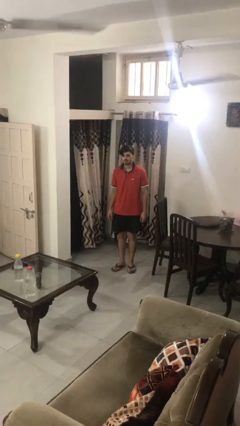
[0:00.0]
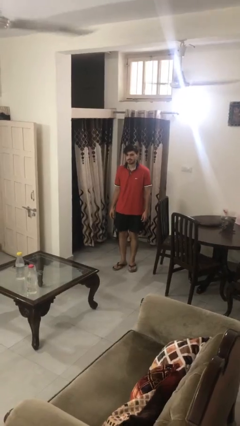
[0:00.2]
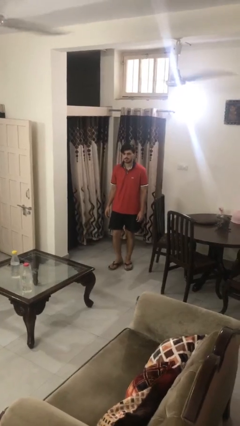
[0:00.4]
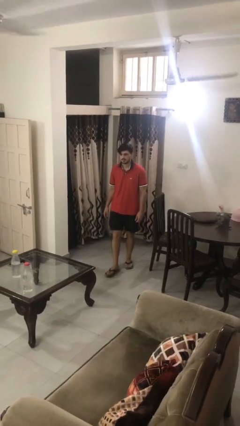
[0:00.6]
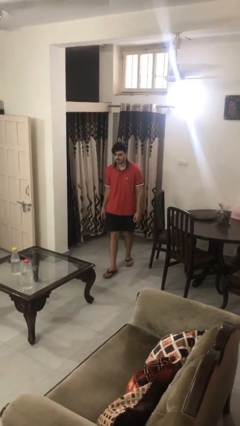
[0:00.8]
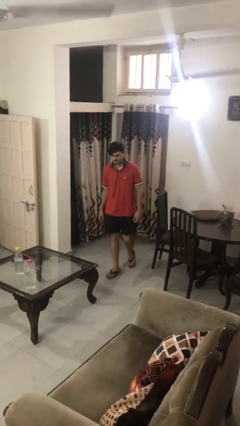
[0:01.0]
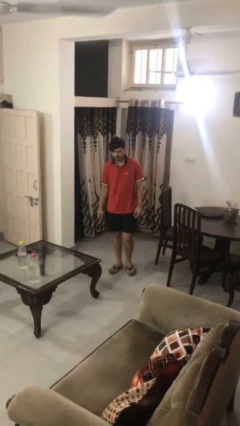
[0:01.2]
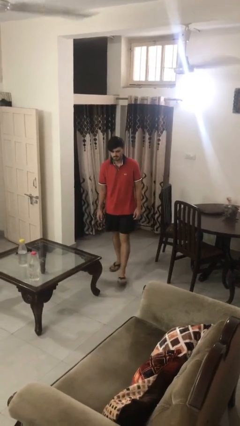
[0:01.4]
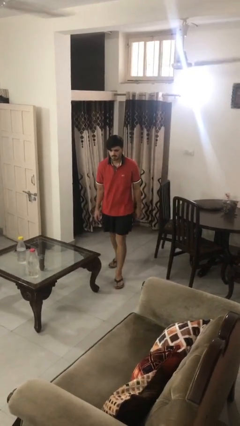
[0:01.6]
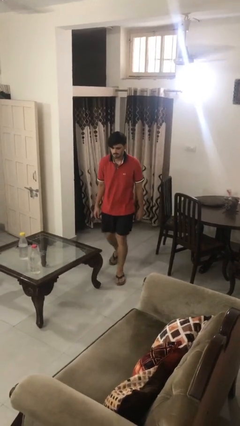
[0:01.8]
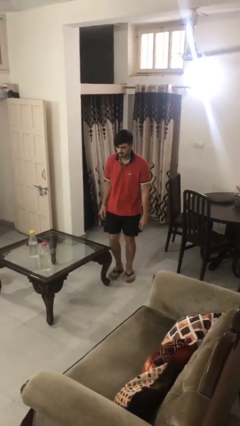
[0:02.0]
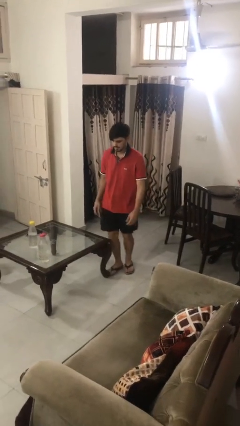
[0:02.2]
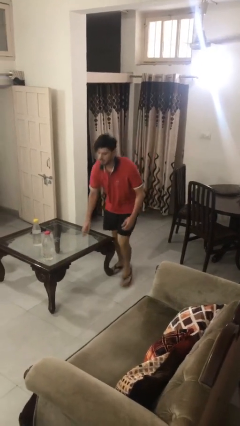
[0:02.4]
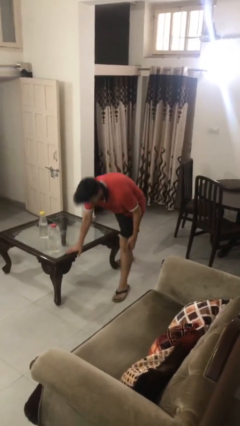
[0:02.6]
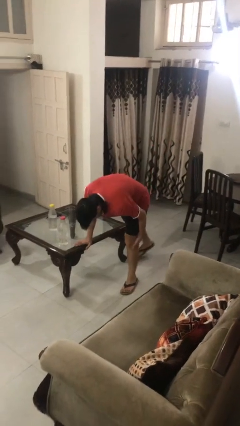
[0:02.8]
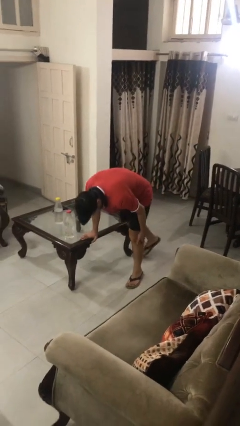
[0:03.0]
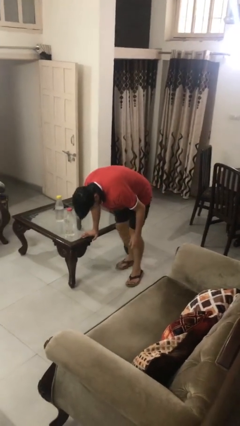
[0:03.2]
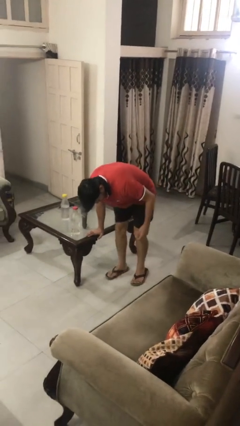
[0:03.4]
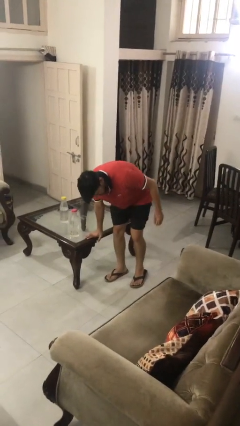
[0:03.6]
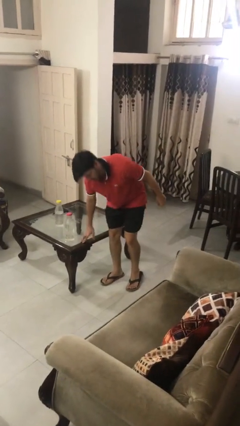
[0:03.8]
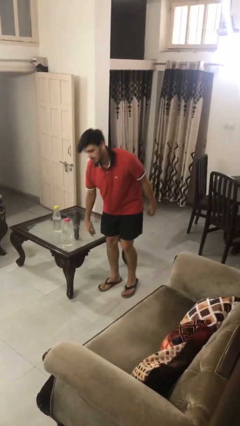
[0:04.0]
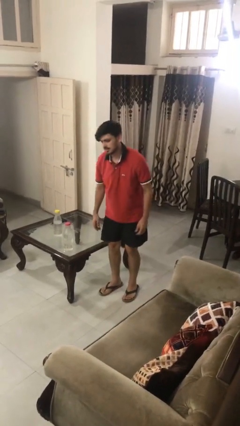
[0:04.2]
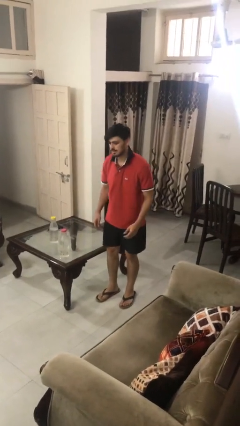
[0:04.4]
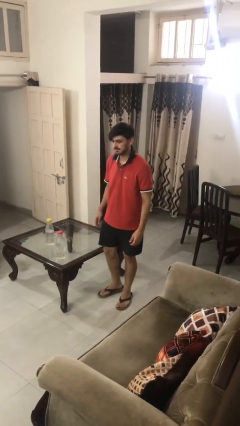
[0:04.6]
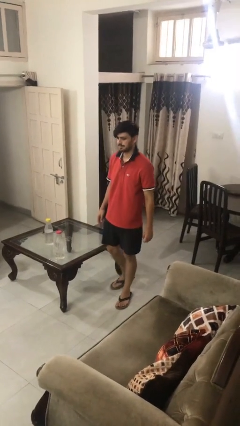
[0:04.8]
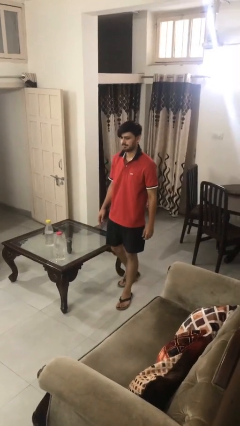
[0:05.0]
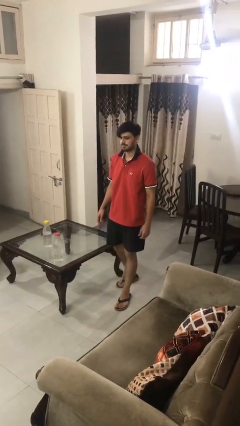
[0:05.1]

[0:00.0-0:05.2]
person bumps into table

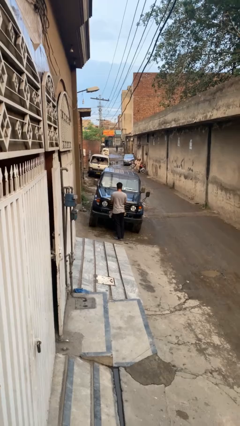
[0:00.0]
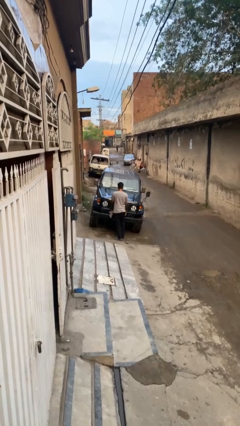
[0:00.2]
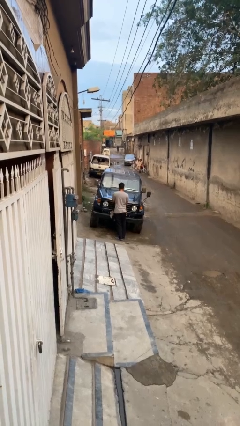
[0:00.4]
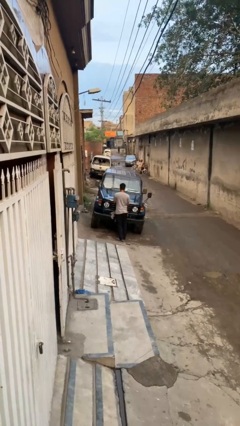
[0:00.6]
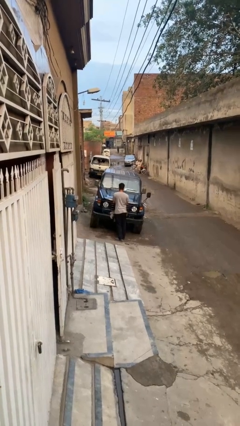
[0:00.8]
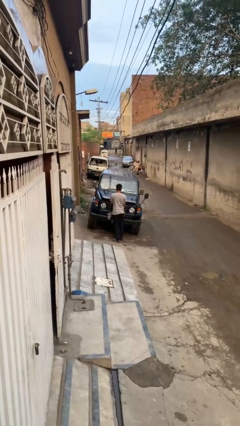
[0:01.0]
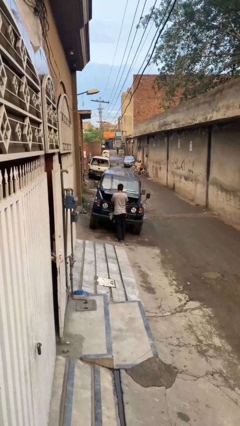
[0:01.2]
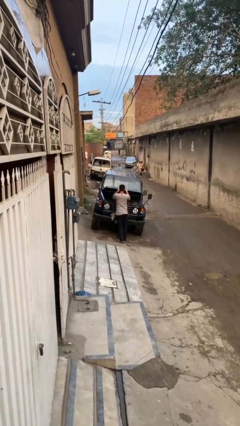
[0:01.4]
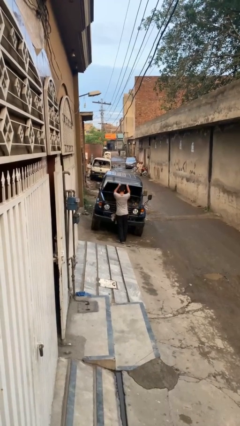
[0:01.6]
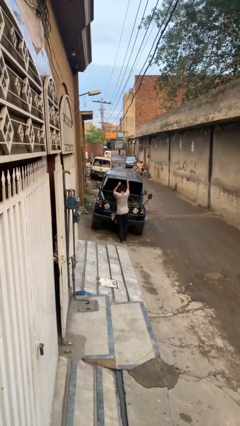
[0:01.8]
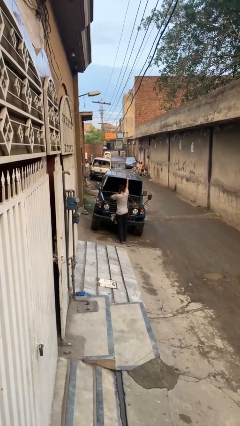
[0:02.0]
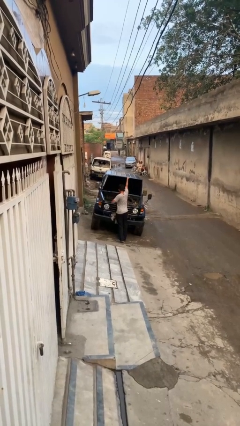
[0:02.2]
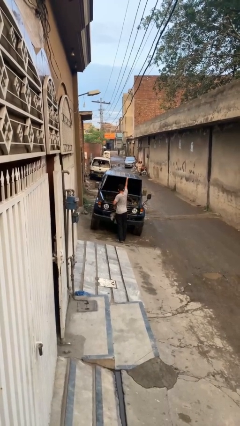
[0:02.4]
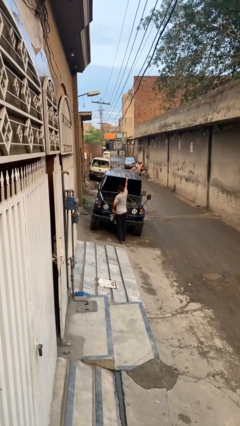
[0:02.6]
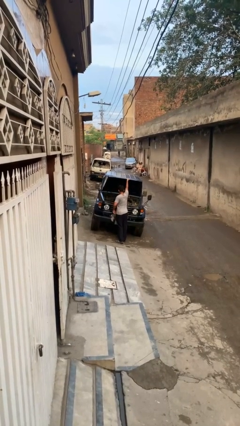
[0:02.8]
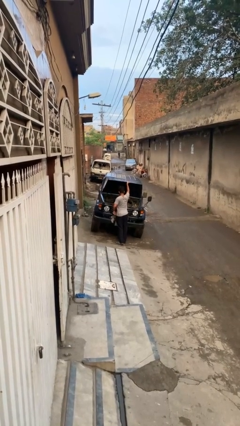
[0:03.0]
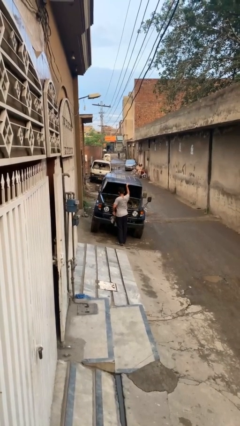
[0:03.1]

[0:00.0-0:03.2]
person opens car hood

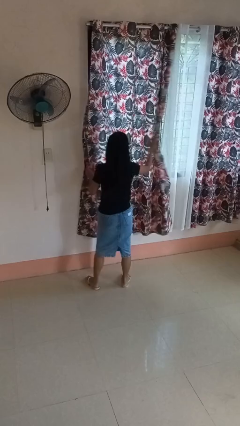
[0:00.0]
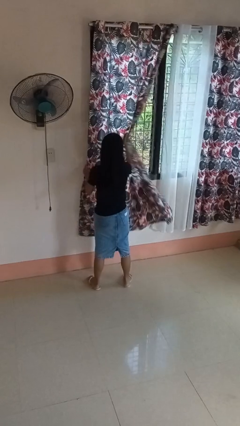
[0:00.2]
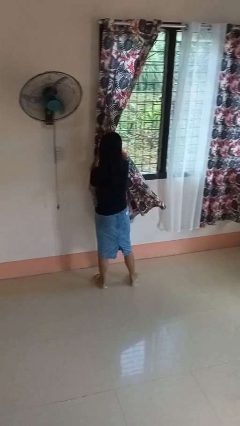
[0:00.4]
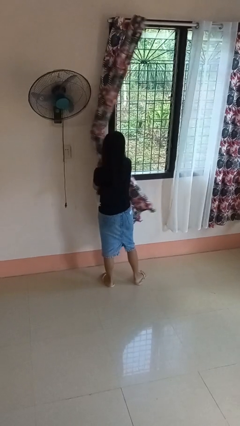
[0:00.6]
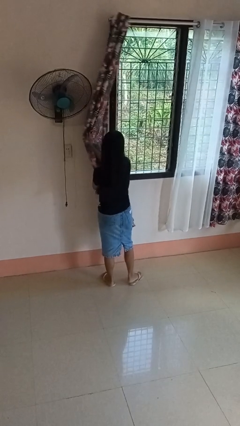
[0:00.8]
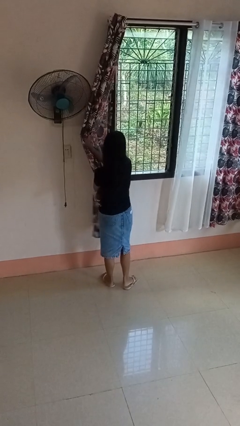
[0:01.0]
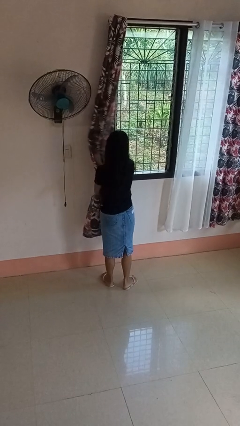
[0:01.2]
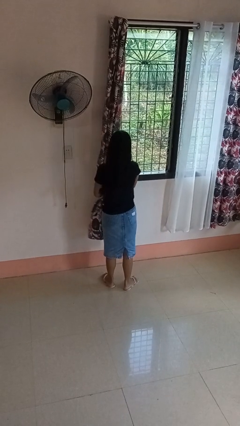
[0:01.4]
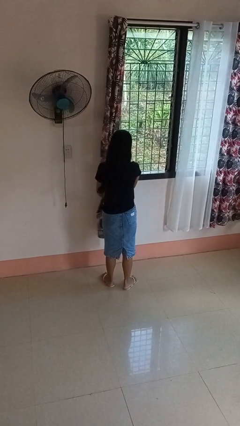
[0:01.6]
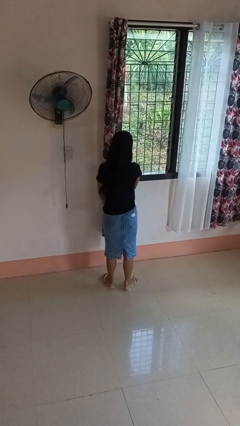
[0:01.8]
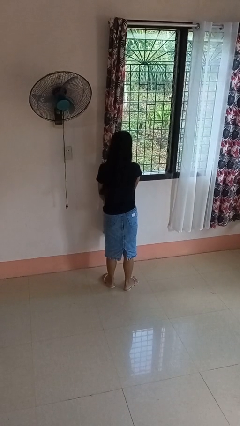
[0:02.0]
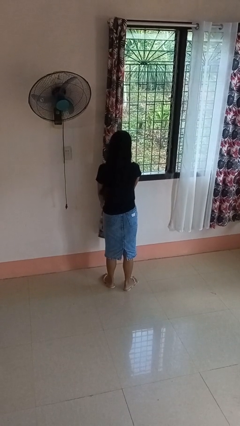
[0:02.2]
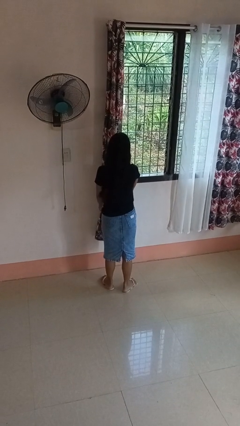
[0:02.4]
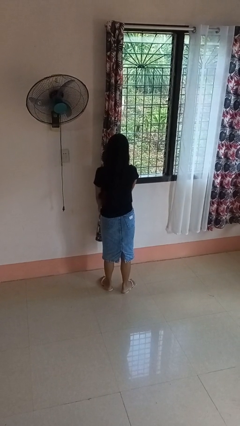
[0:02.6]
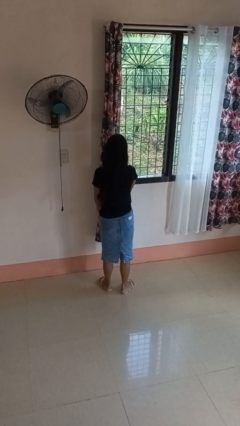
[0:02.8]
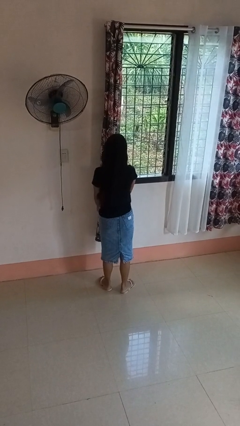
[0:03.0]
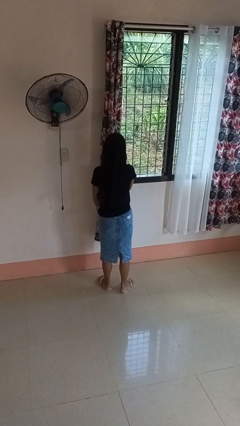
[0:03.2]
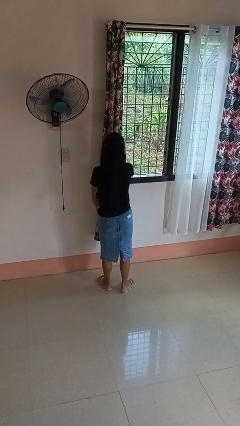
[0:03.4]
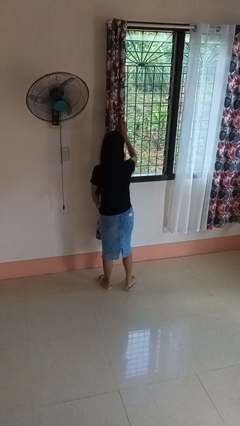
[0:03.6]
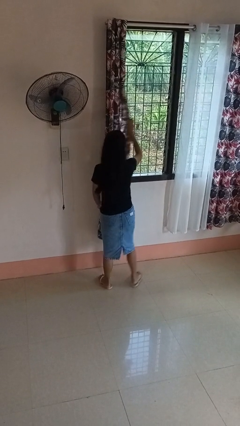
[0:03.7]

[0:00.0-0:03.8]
person opens curtains

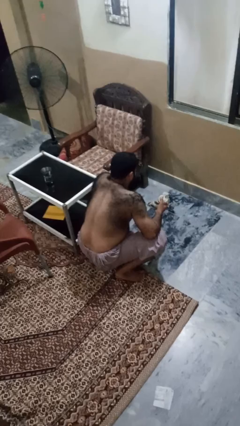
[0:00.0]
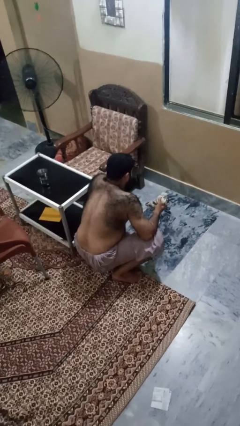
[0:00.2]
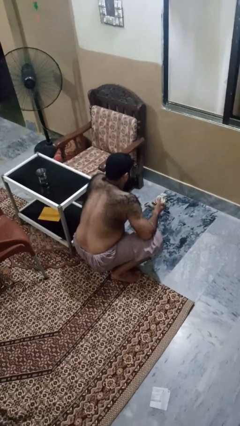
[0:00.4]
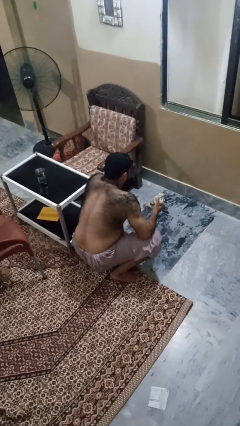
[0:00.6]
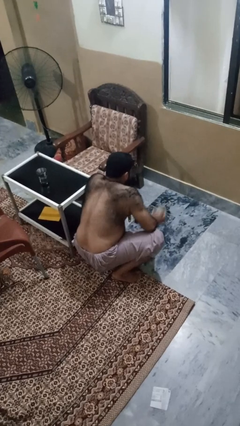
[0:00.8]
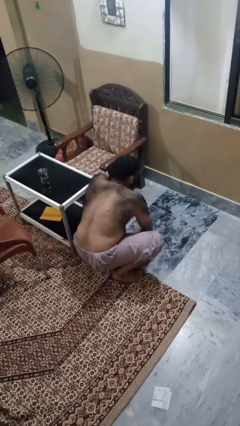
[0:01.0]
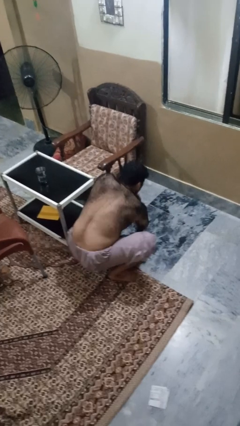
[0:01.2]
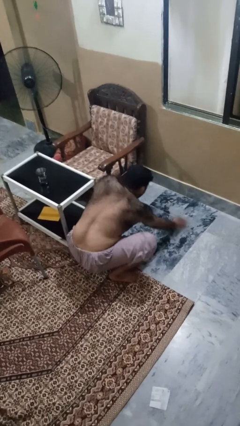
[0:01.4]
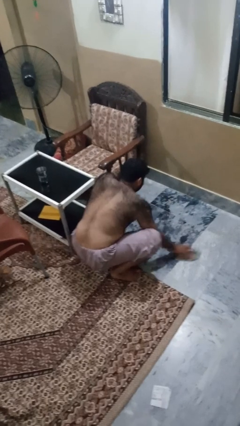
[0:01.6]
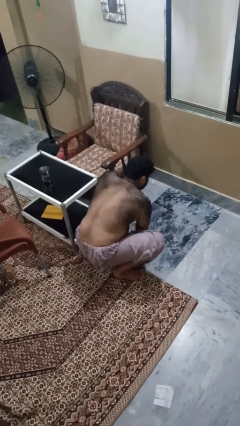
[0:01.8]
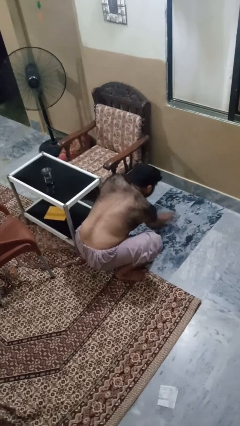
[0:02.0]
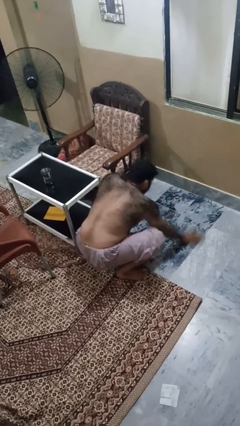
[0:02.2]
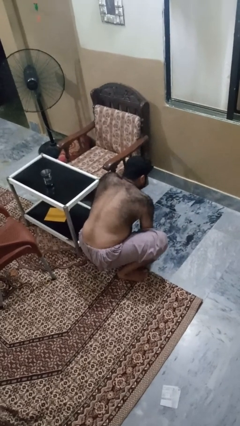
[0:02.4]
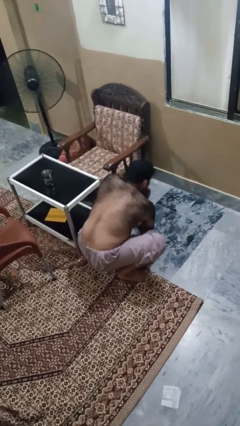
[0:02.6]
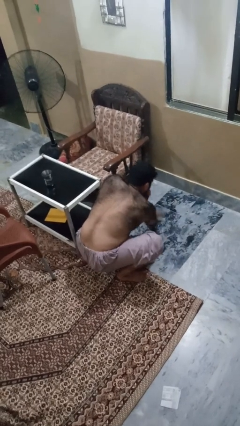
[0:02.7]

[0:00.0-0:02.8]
person mops

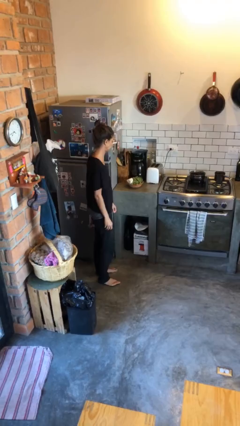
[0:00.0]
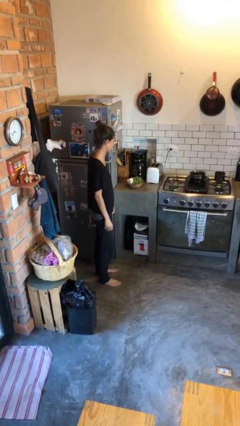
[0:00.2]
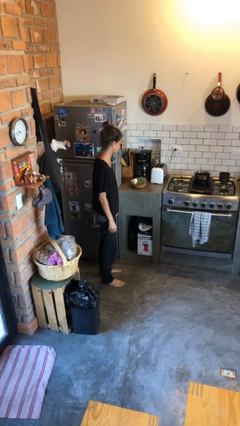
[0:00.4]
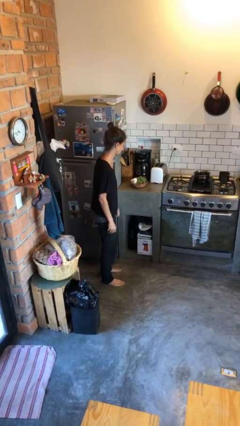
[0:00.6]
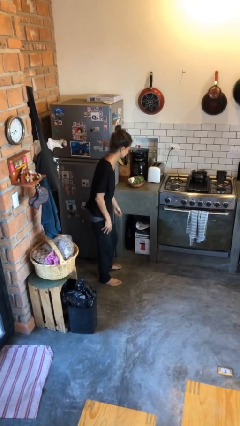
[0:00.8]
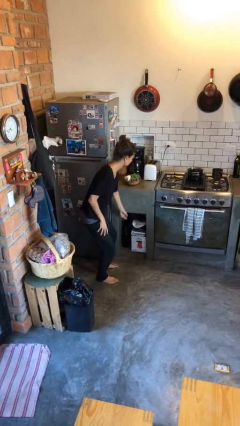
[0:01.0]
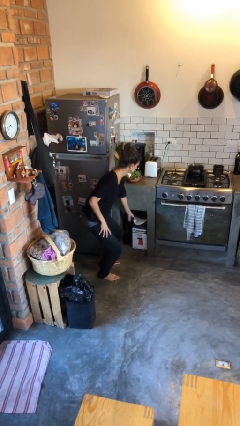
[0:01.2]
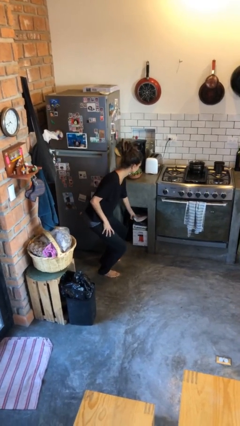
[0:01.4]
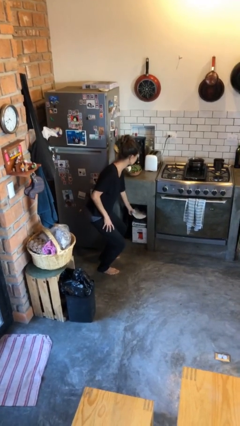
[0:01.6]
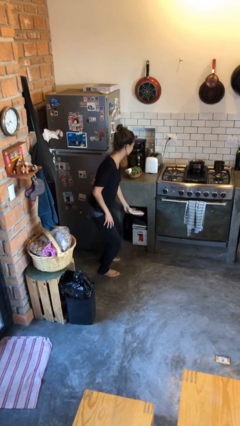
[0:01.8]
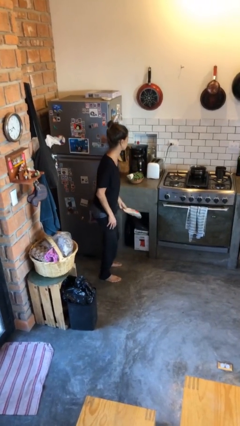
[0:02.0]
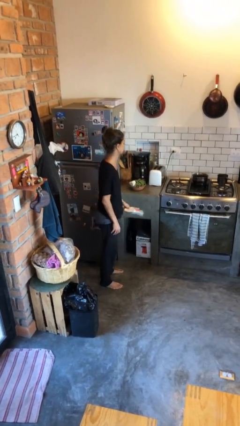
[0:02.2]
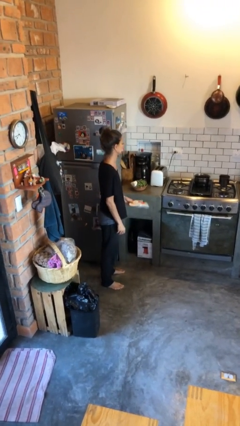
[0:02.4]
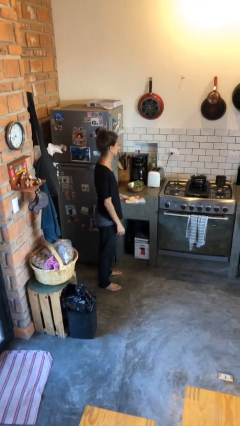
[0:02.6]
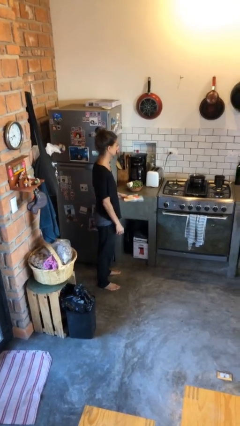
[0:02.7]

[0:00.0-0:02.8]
person picks up object from cabinet
